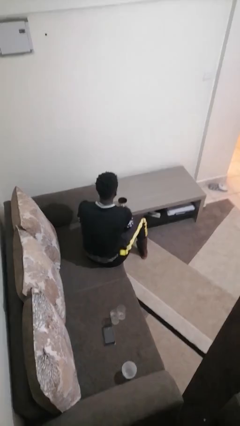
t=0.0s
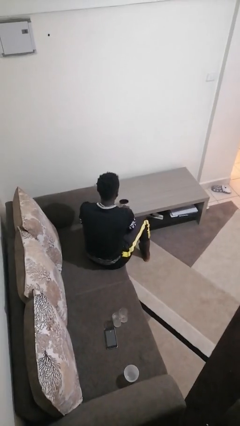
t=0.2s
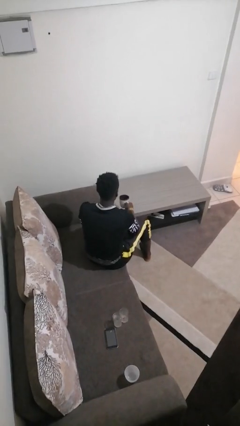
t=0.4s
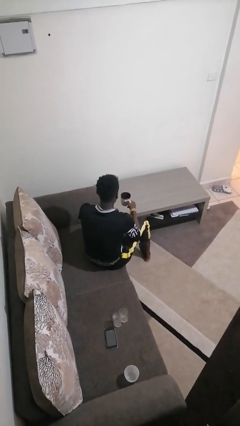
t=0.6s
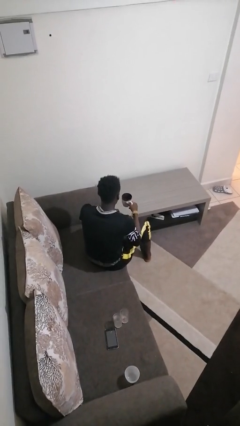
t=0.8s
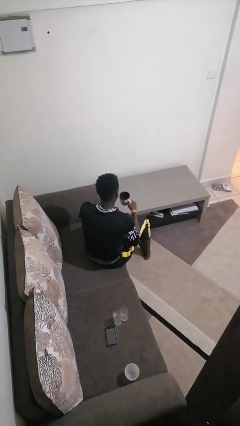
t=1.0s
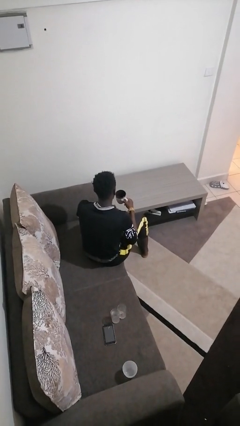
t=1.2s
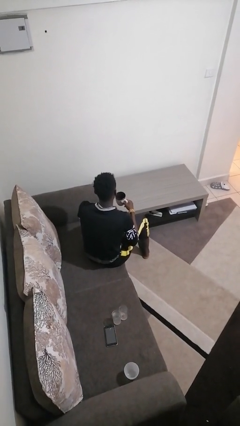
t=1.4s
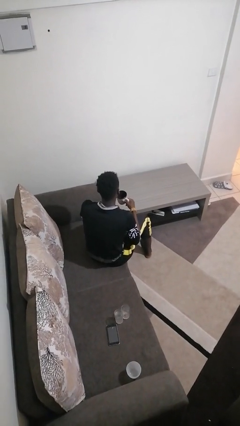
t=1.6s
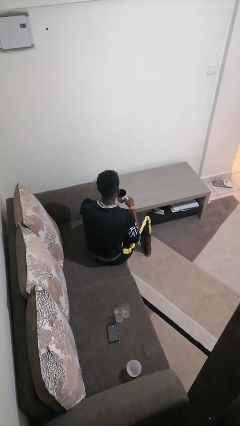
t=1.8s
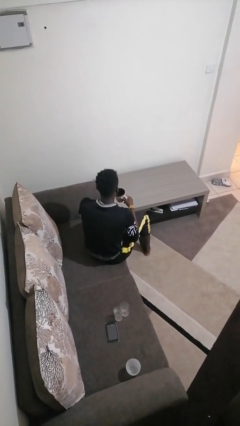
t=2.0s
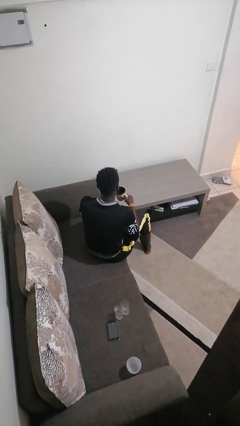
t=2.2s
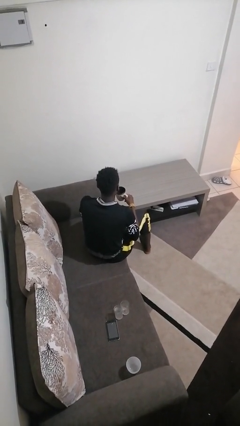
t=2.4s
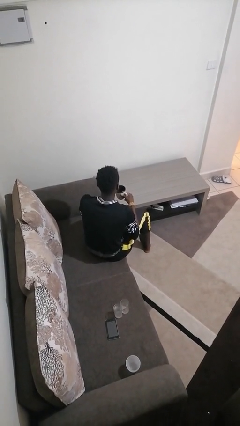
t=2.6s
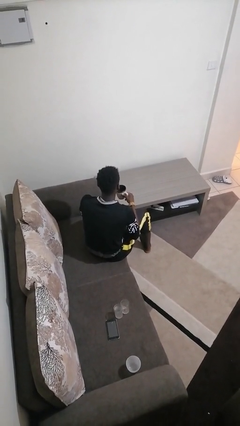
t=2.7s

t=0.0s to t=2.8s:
person picks up object from table

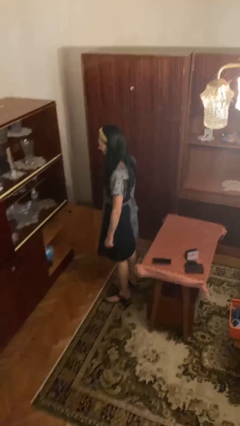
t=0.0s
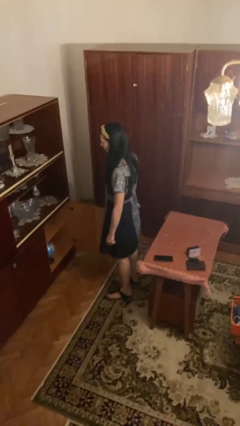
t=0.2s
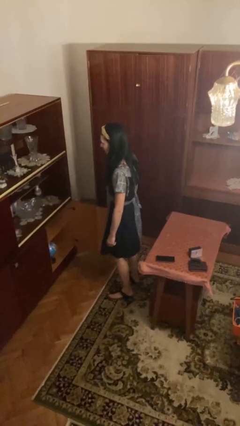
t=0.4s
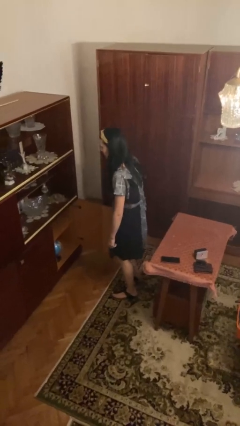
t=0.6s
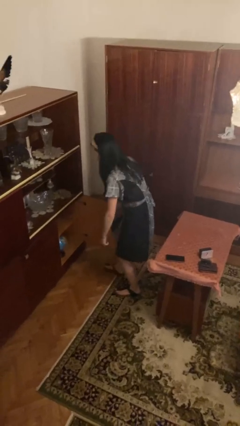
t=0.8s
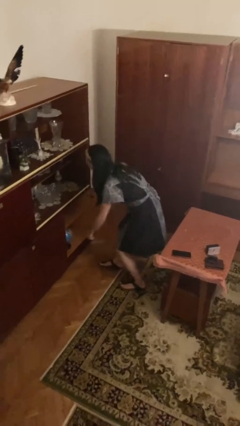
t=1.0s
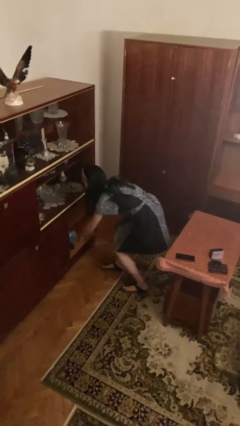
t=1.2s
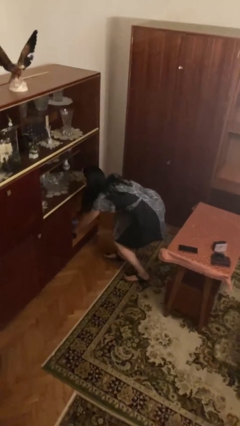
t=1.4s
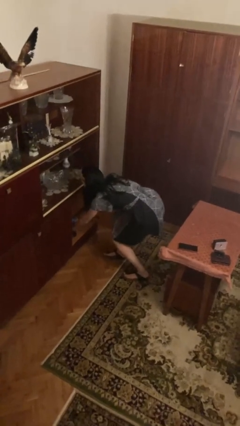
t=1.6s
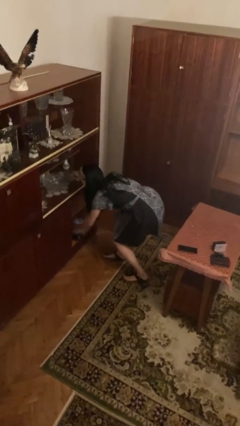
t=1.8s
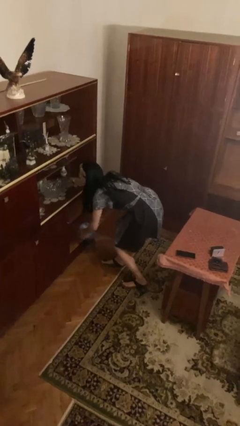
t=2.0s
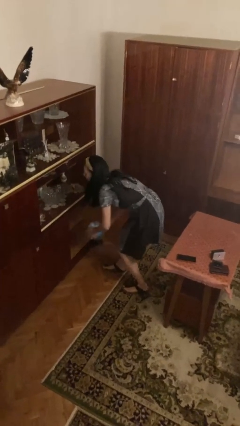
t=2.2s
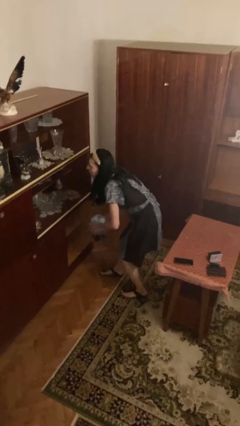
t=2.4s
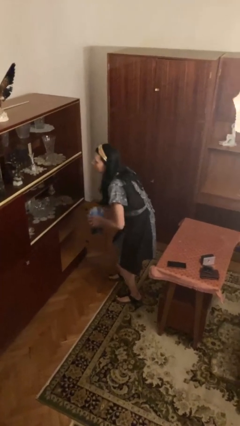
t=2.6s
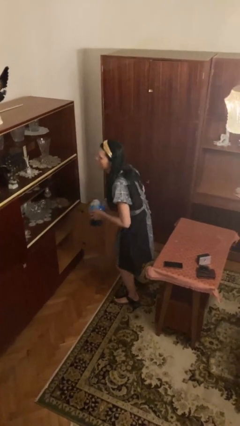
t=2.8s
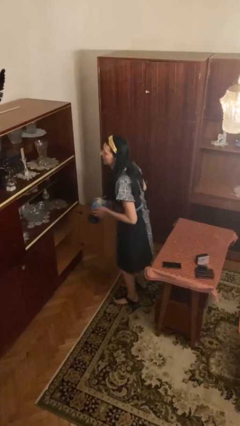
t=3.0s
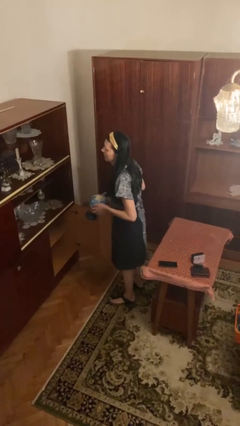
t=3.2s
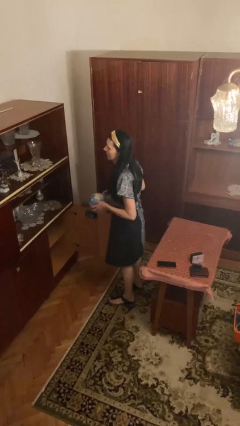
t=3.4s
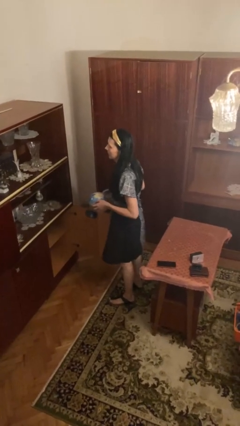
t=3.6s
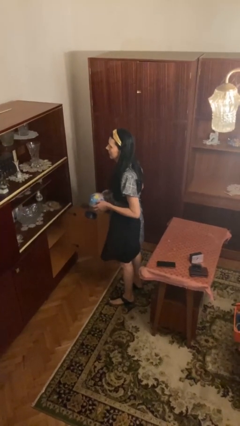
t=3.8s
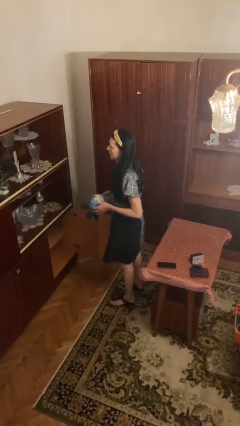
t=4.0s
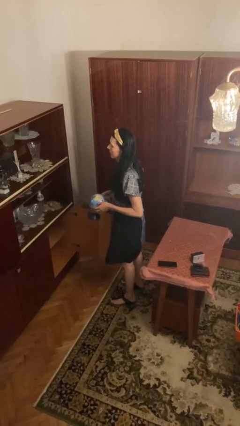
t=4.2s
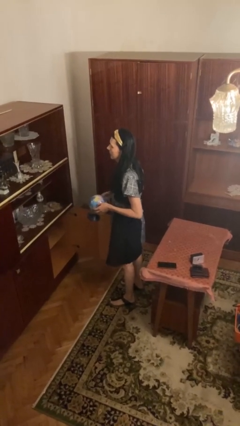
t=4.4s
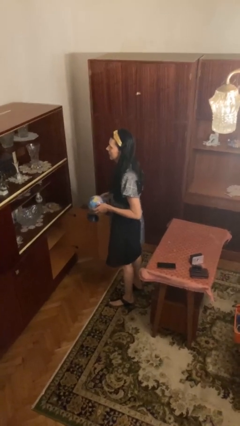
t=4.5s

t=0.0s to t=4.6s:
person picks up object from cabinet

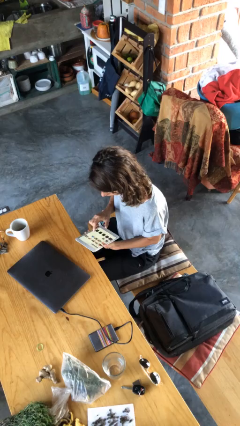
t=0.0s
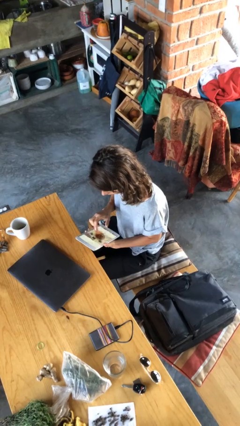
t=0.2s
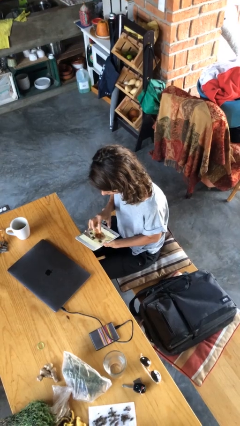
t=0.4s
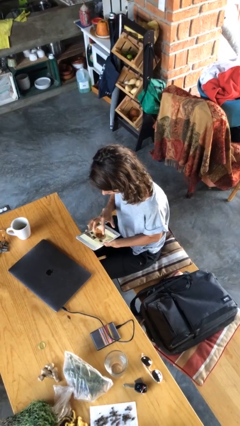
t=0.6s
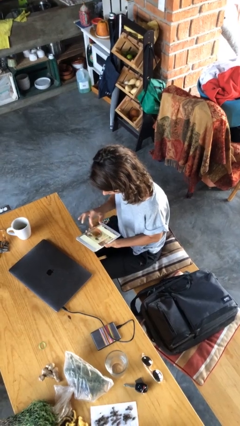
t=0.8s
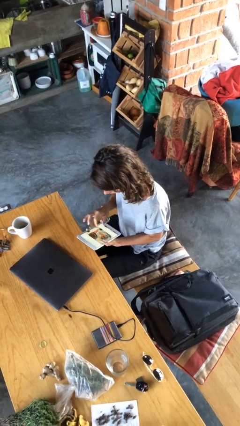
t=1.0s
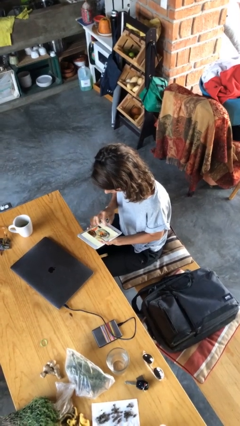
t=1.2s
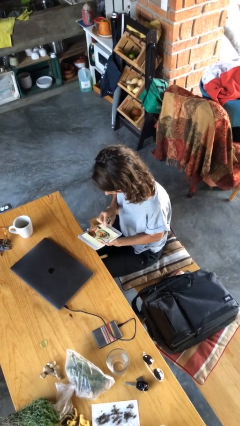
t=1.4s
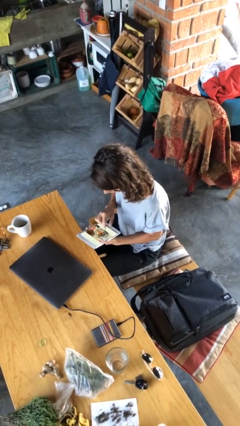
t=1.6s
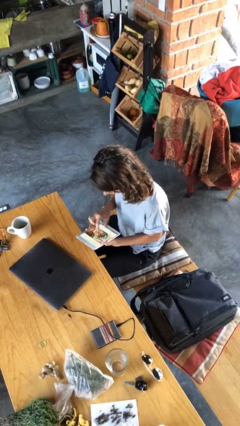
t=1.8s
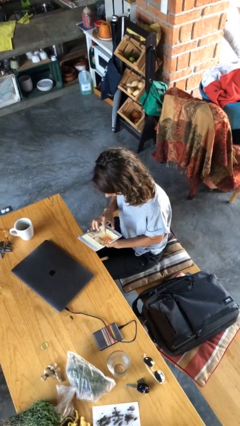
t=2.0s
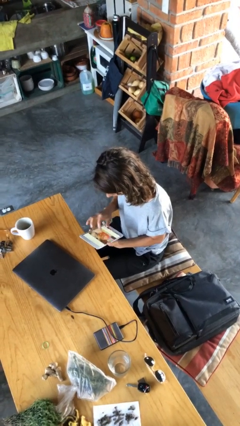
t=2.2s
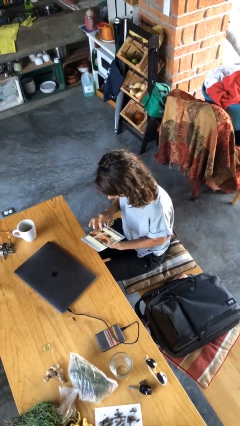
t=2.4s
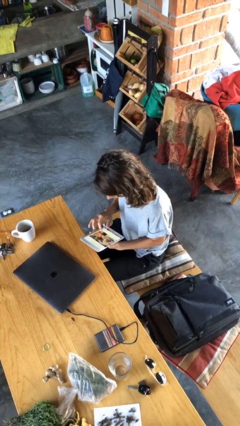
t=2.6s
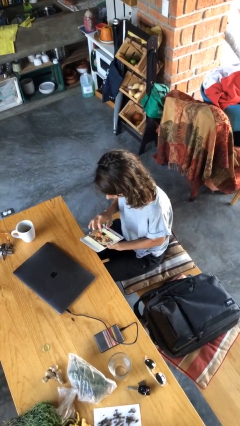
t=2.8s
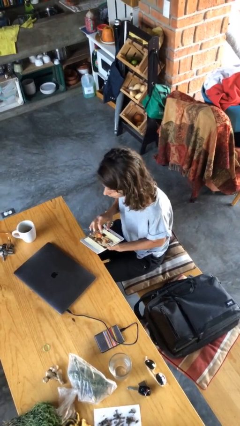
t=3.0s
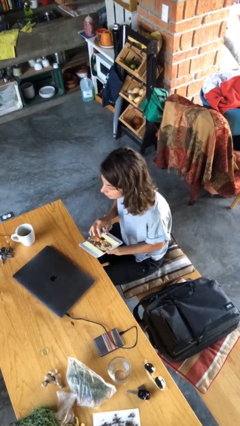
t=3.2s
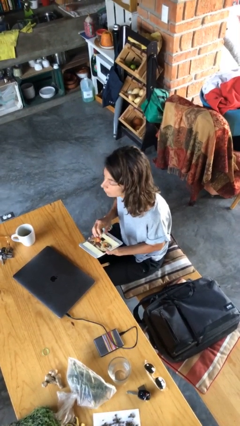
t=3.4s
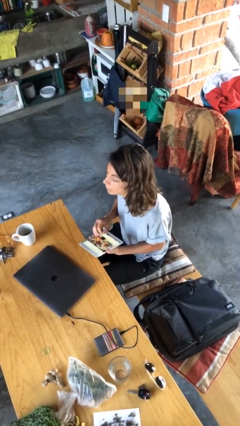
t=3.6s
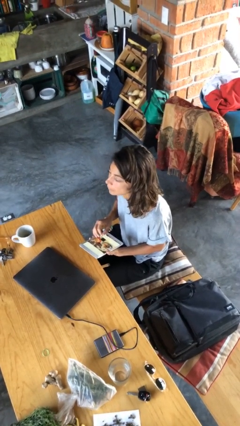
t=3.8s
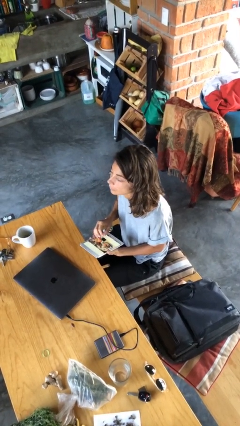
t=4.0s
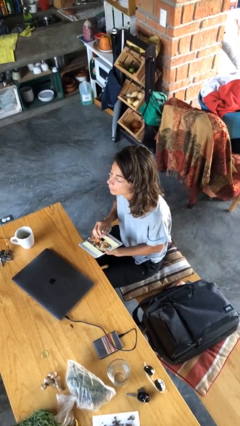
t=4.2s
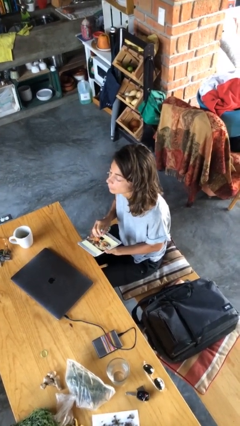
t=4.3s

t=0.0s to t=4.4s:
person interacts with tablet

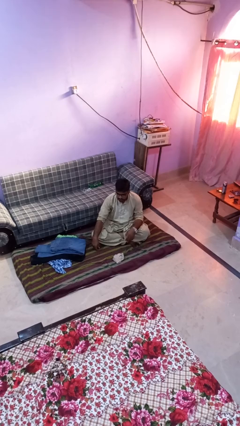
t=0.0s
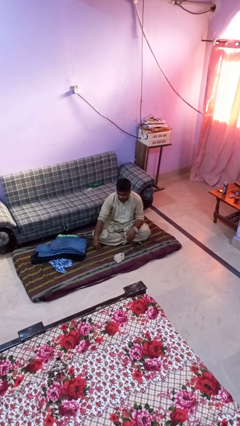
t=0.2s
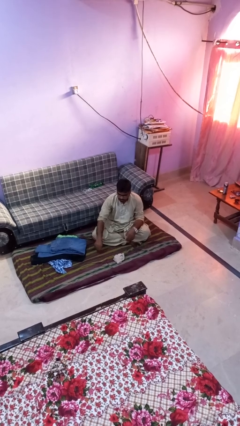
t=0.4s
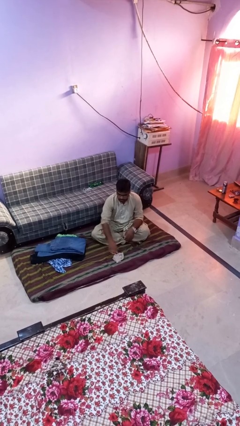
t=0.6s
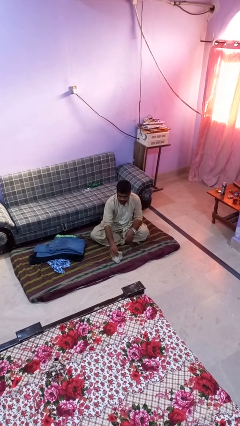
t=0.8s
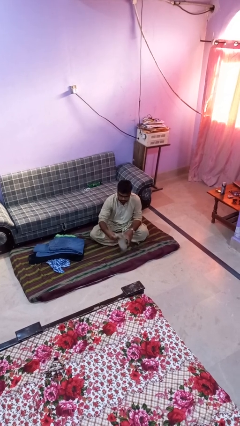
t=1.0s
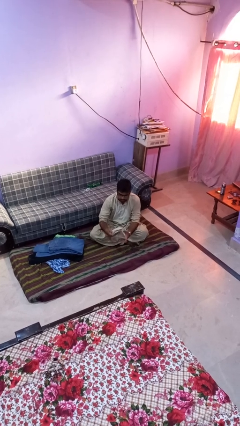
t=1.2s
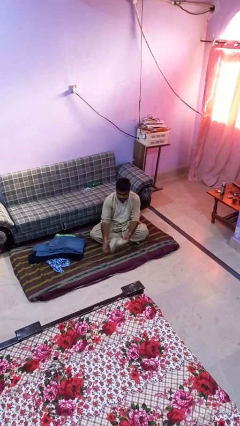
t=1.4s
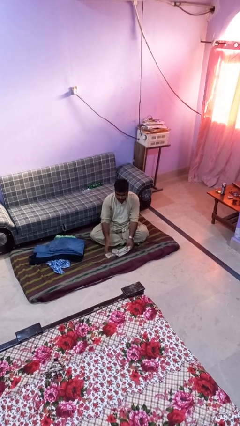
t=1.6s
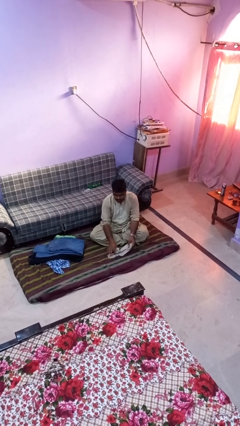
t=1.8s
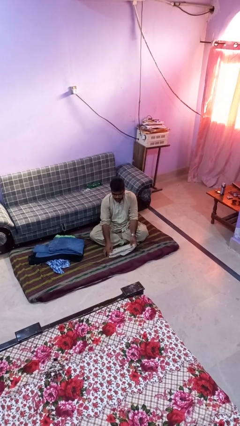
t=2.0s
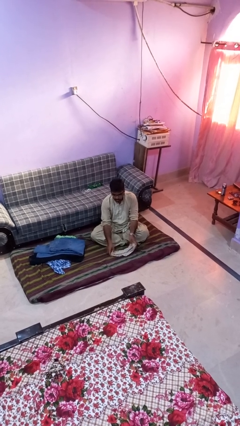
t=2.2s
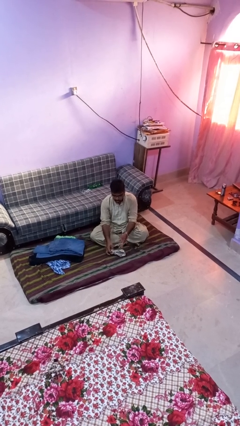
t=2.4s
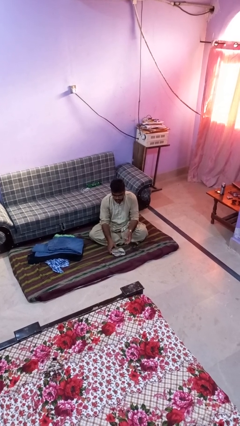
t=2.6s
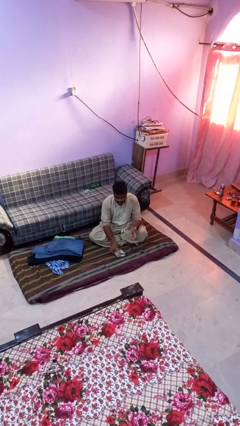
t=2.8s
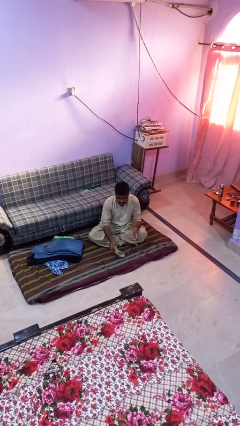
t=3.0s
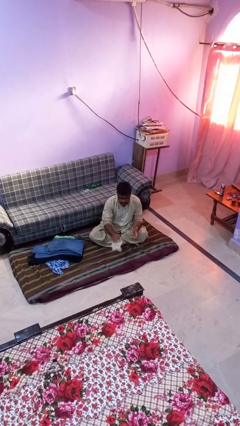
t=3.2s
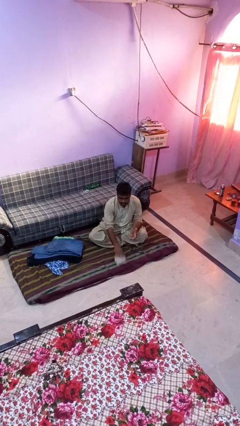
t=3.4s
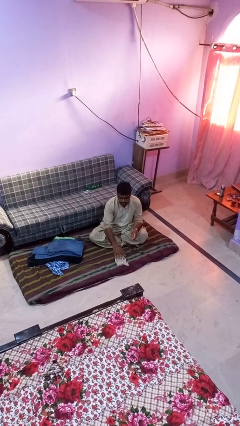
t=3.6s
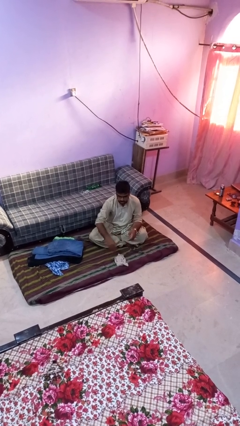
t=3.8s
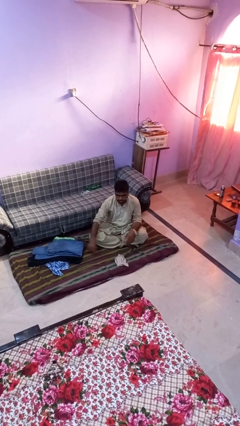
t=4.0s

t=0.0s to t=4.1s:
person folds socks

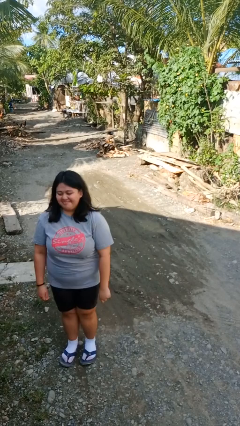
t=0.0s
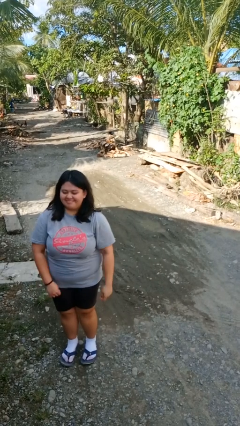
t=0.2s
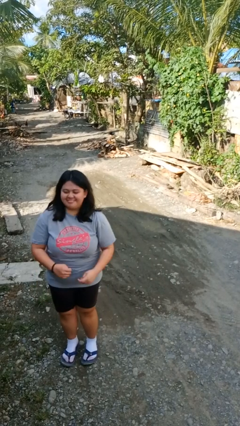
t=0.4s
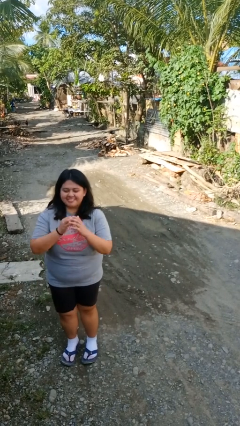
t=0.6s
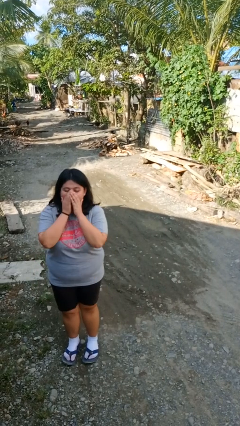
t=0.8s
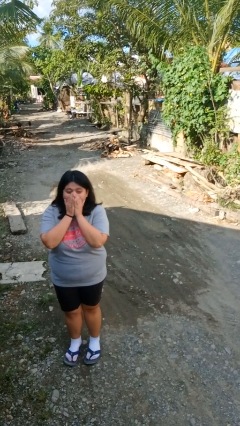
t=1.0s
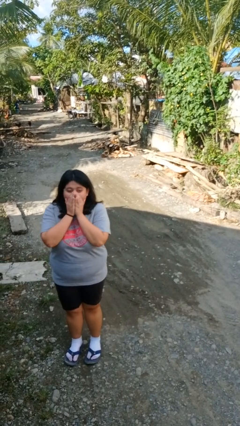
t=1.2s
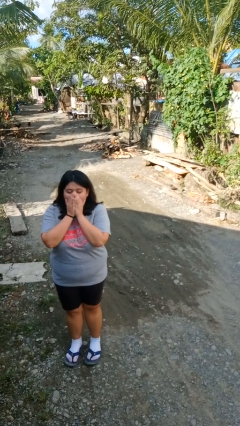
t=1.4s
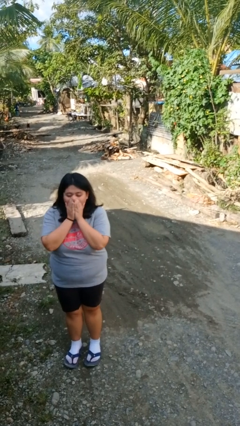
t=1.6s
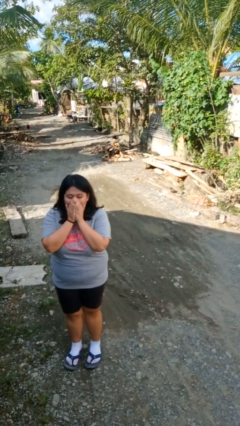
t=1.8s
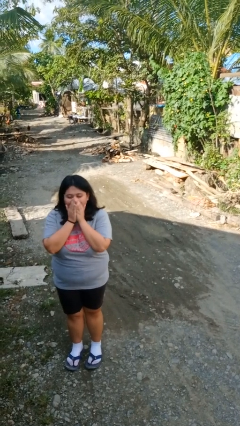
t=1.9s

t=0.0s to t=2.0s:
person blows into hands
